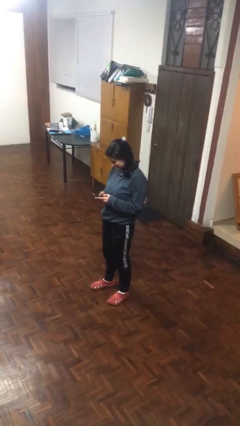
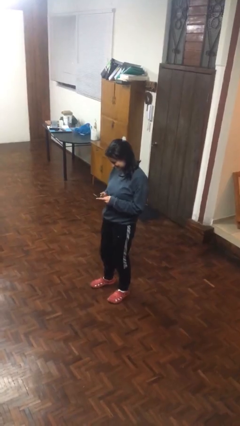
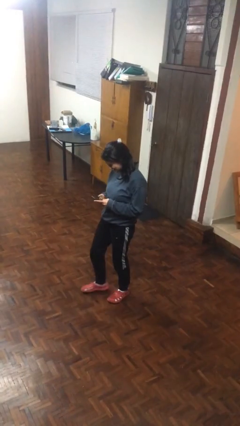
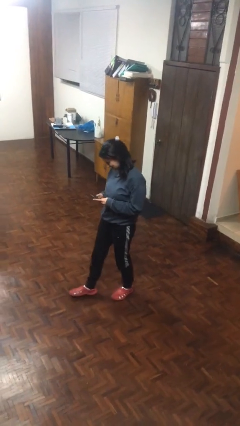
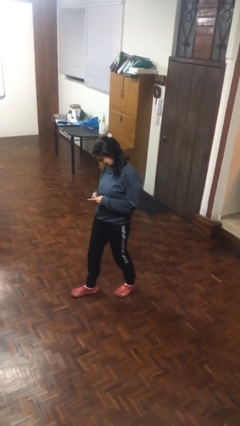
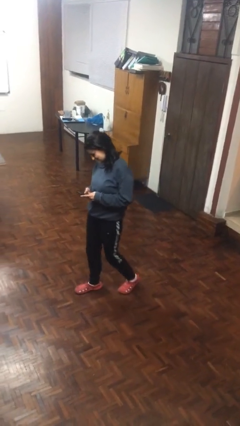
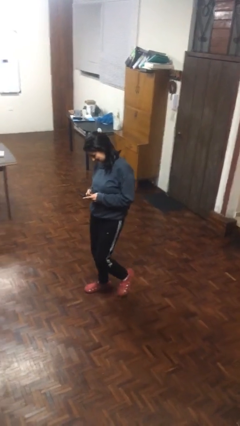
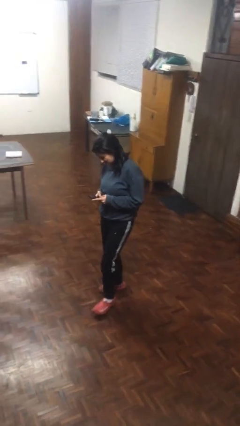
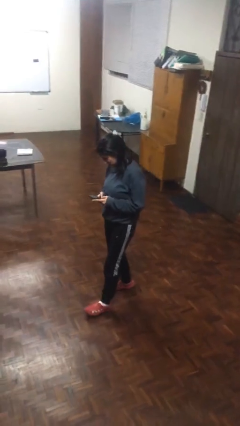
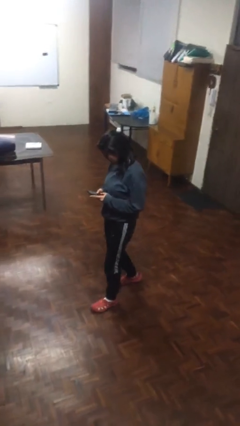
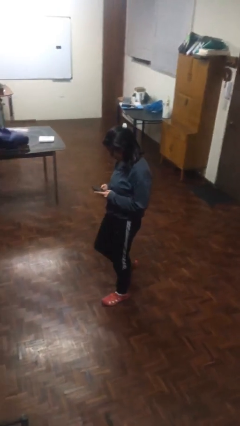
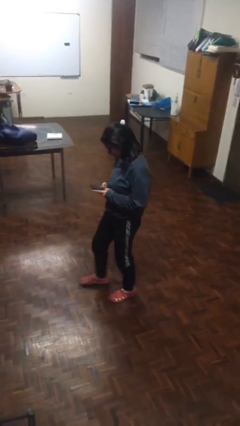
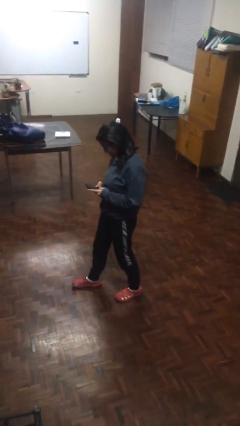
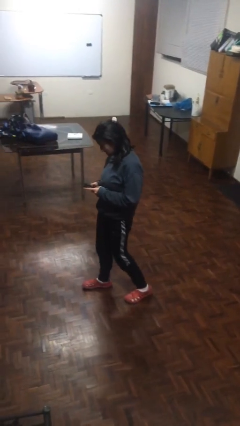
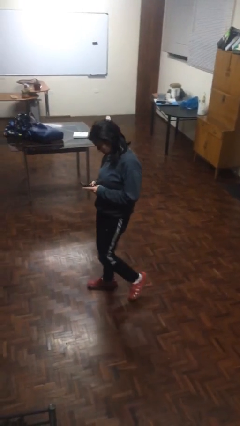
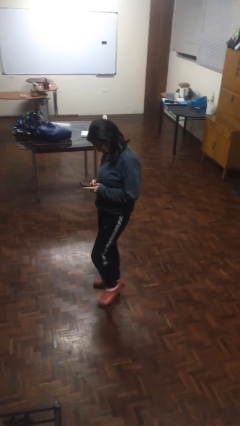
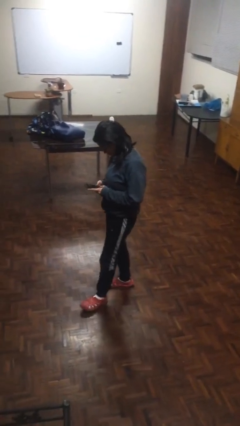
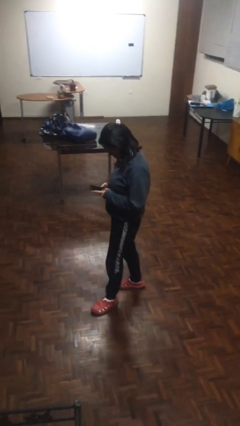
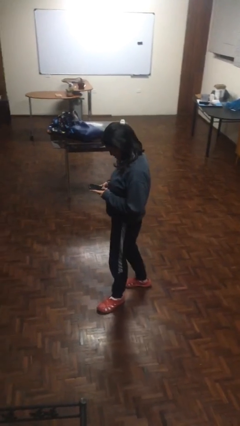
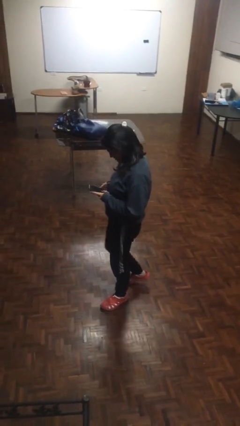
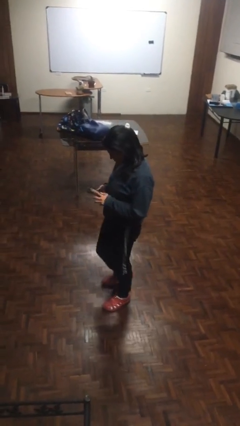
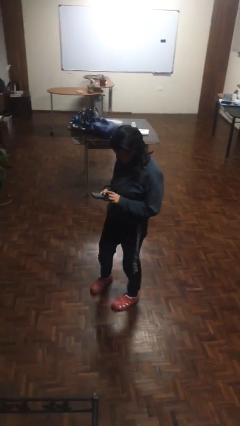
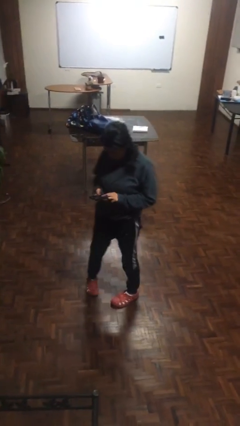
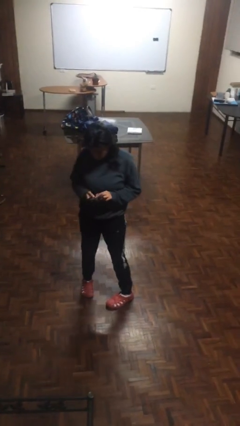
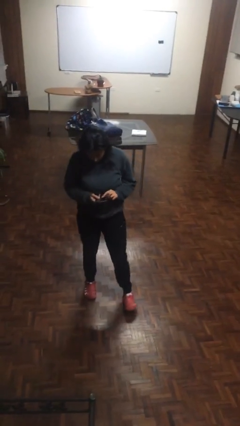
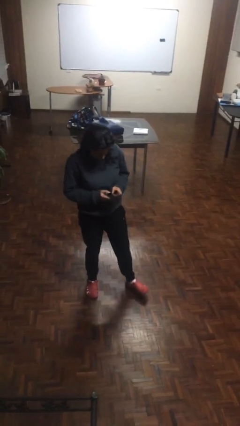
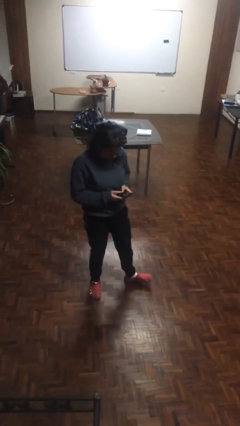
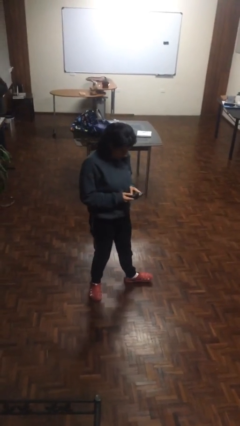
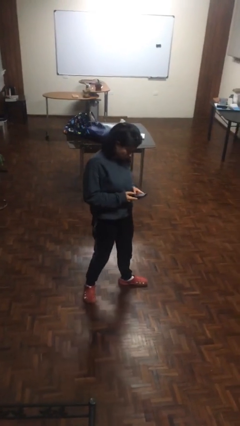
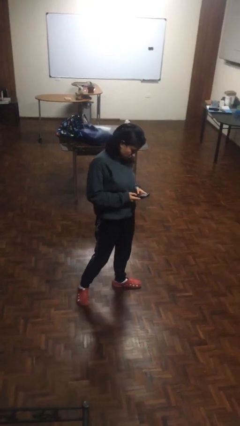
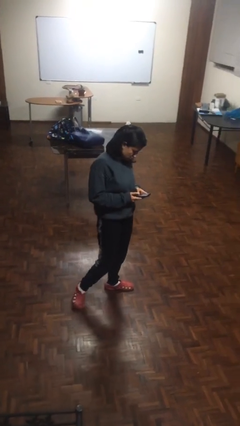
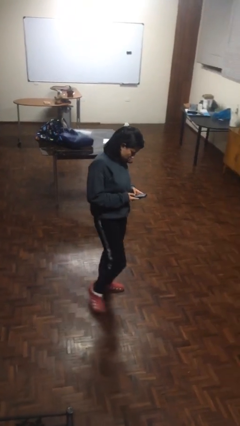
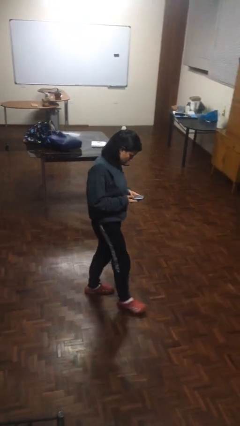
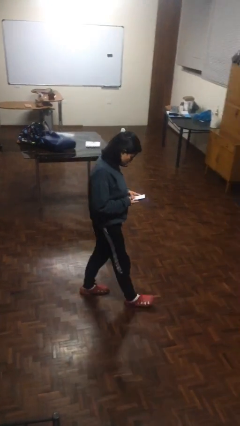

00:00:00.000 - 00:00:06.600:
person texts on phone

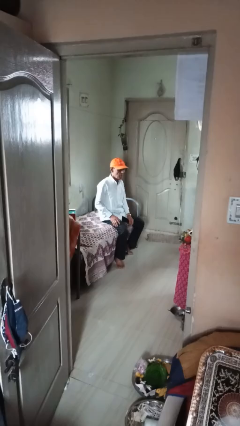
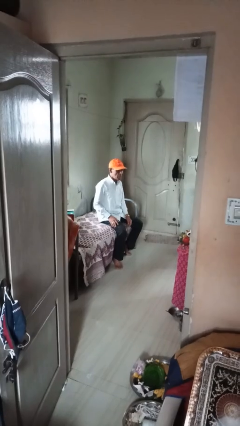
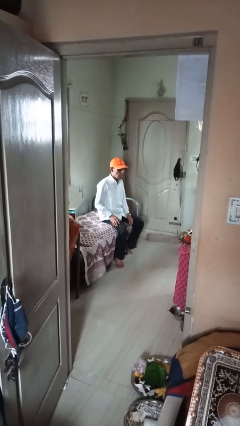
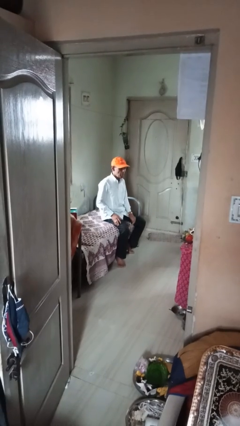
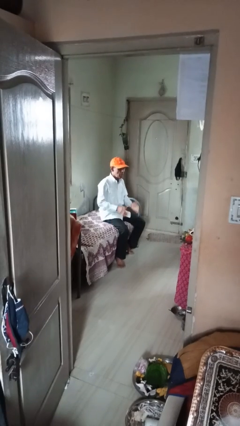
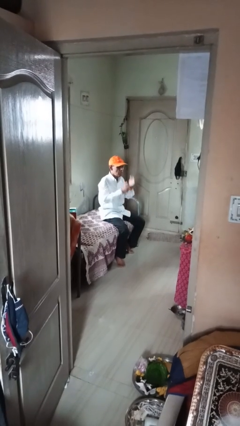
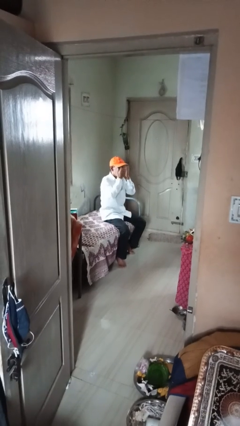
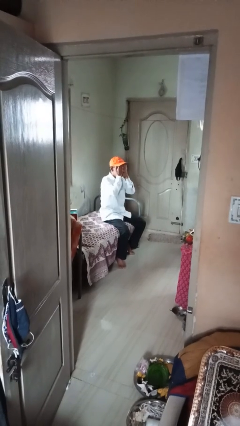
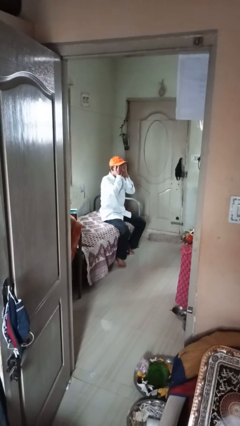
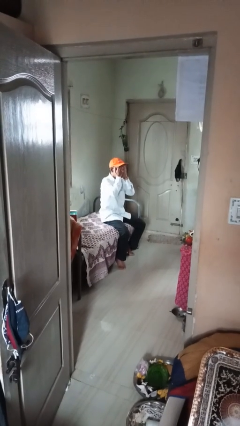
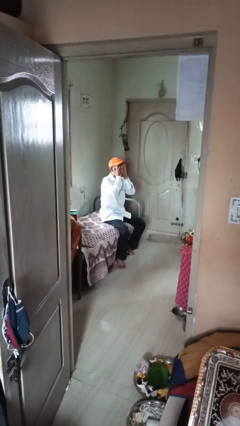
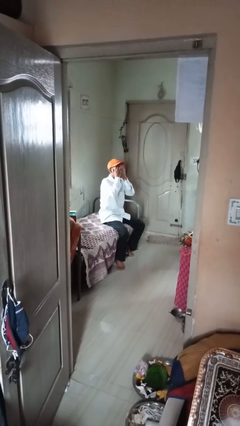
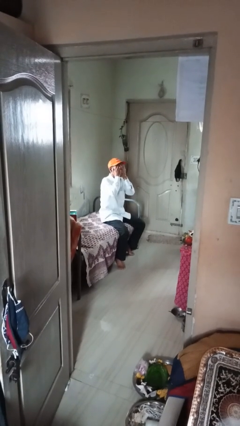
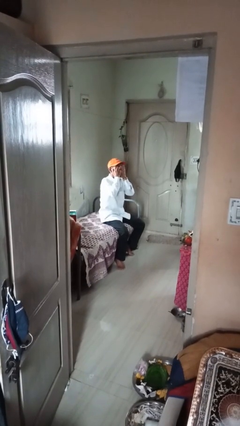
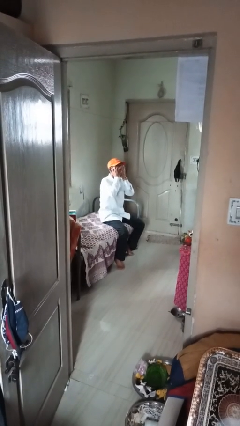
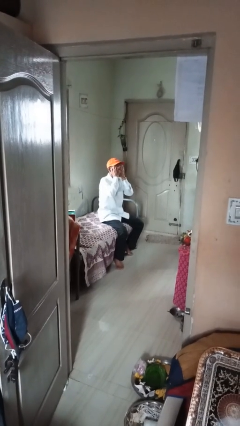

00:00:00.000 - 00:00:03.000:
person covers face with hands

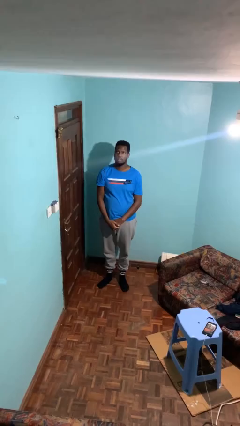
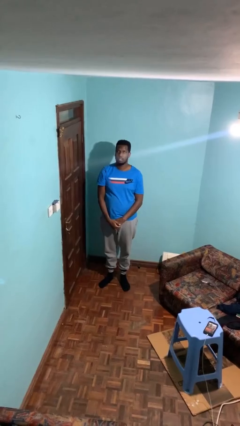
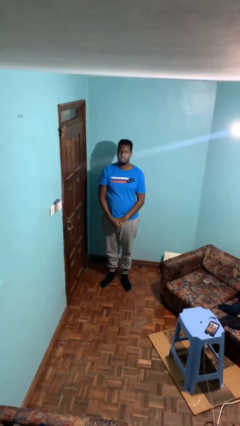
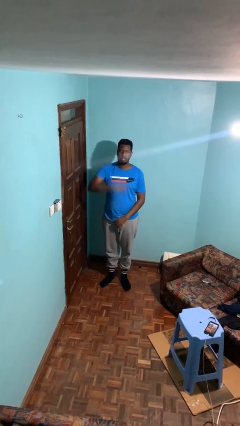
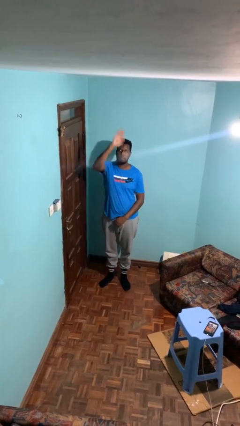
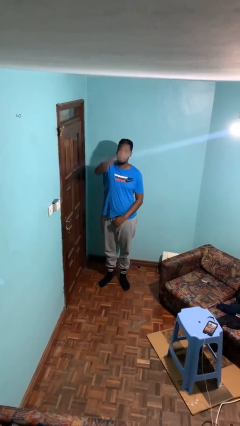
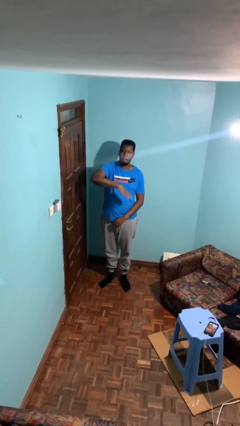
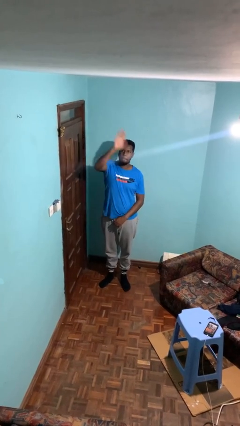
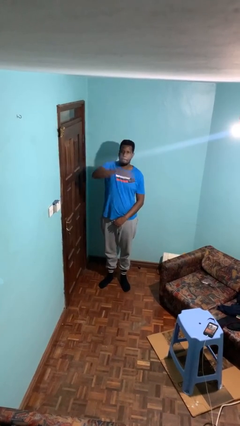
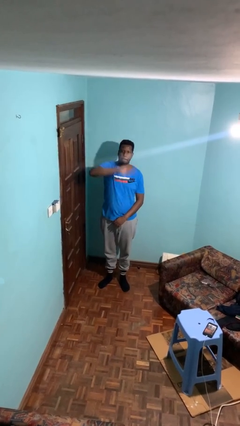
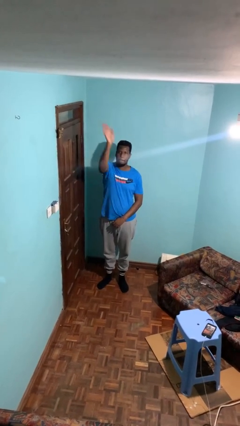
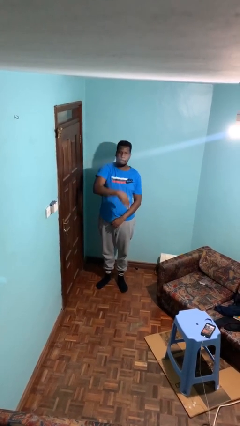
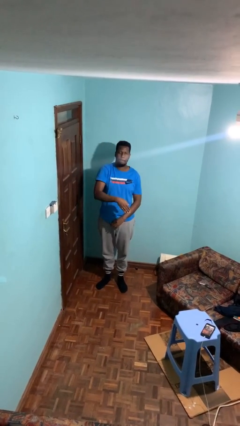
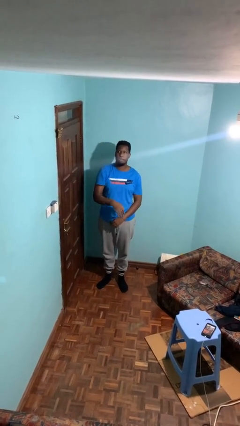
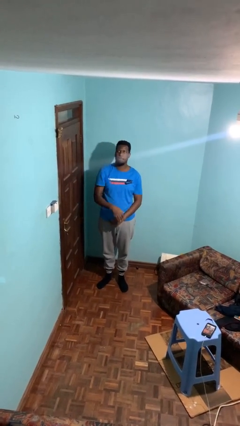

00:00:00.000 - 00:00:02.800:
person gestures swipe down

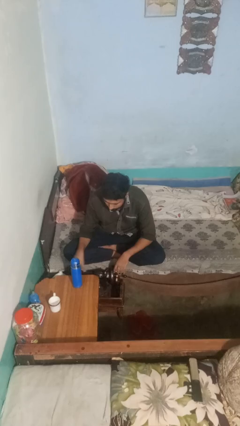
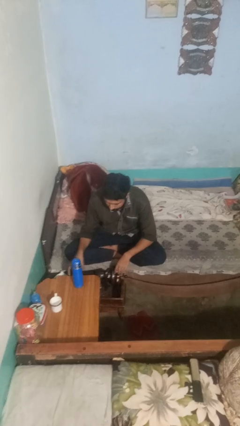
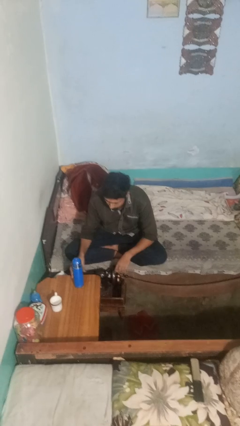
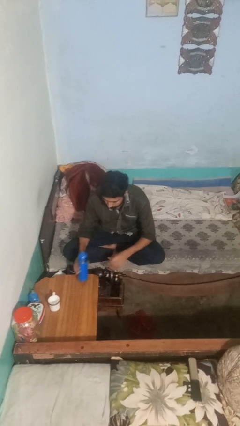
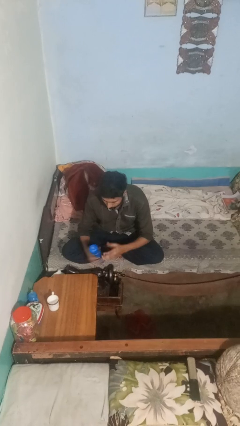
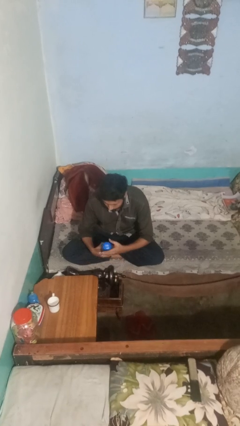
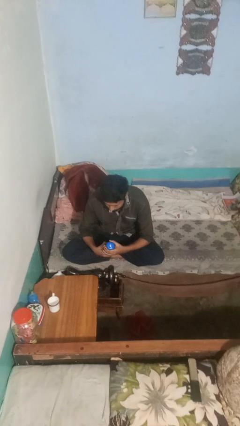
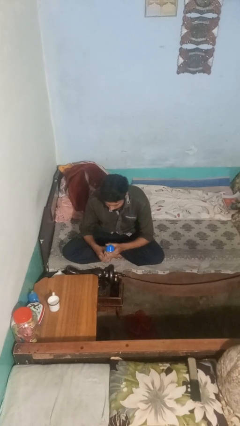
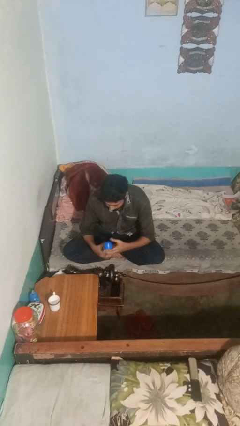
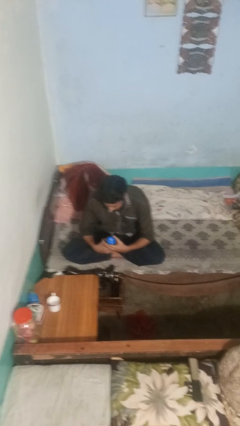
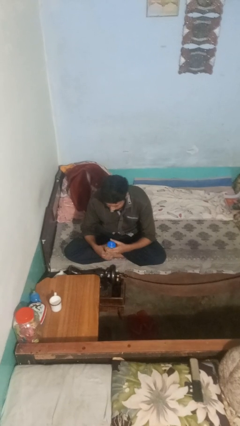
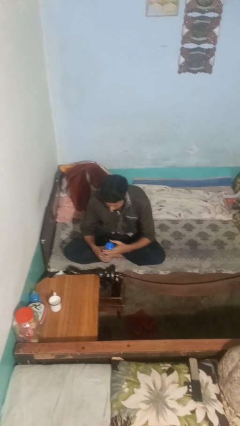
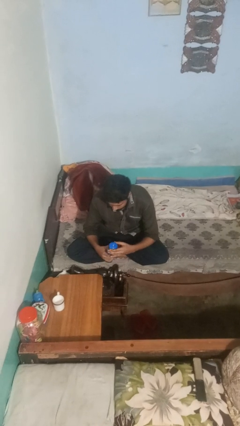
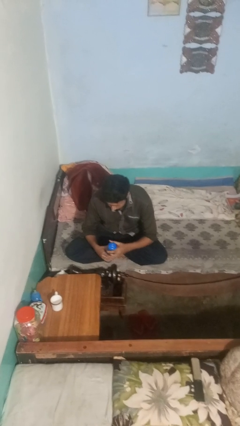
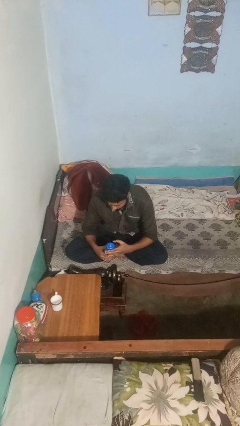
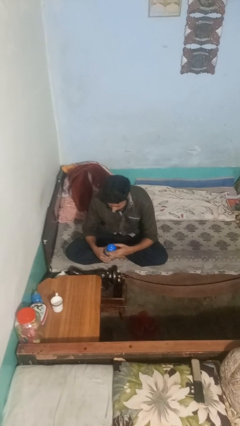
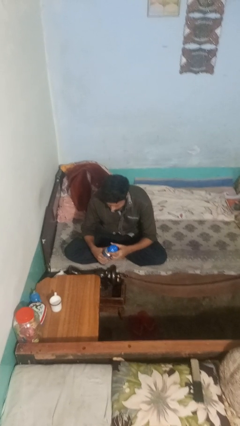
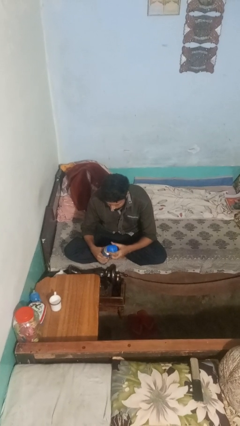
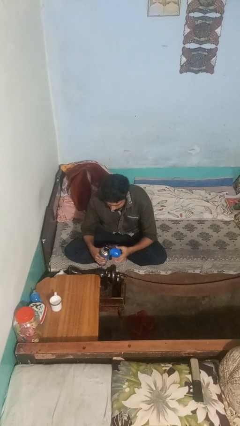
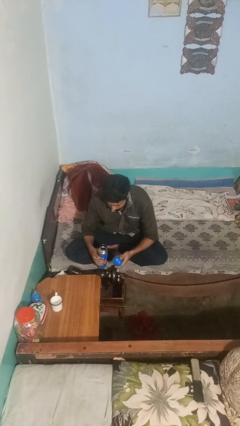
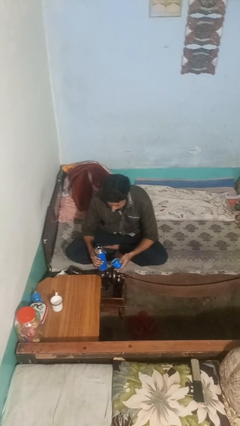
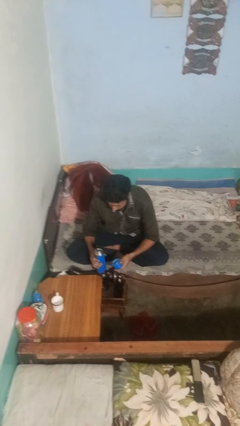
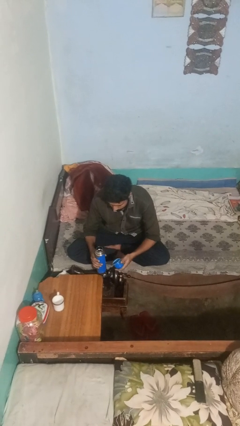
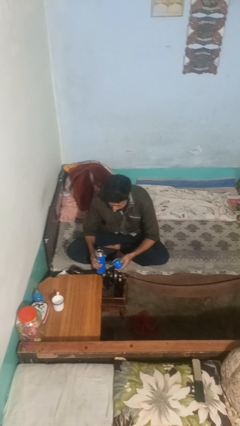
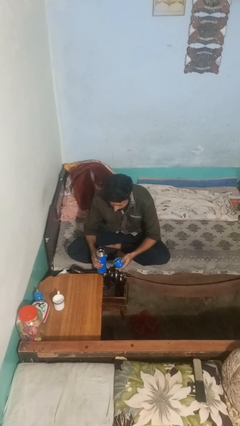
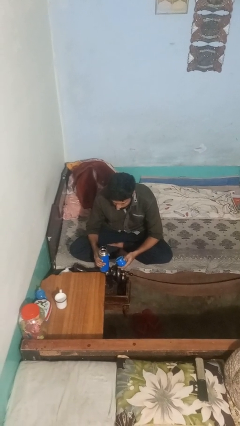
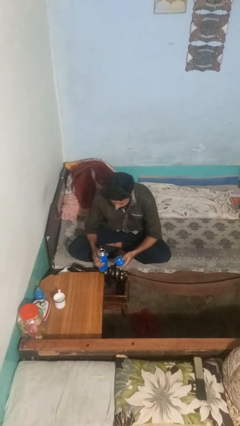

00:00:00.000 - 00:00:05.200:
person unscrews lid from bottle
